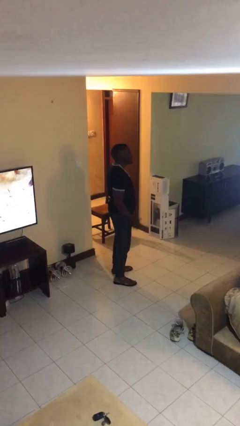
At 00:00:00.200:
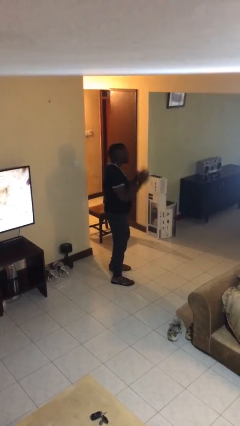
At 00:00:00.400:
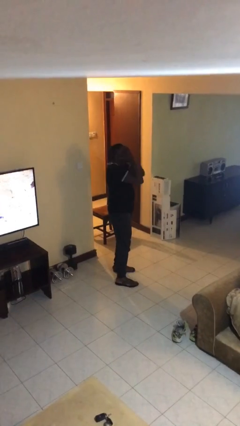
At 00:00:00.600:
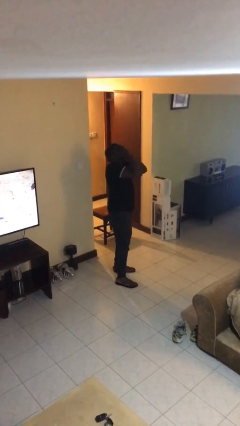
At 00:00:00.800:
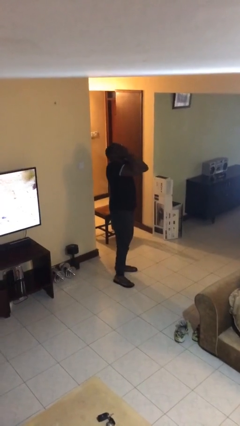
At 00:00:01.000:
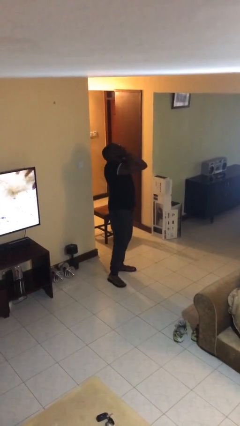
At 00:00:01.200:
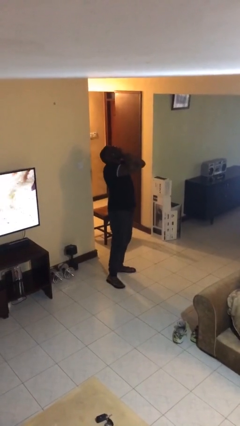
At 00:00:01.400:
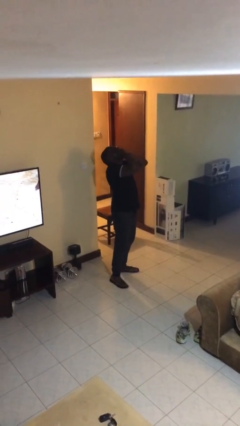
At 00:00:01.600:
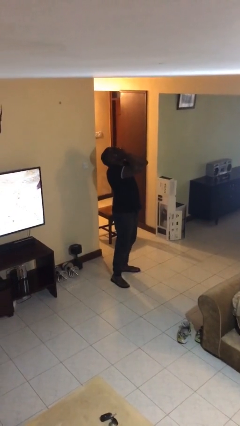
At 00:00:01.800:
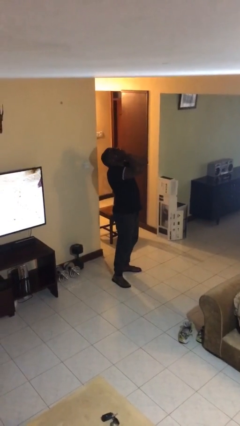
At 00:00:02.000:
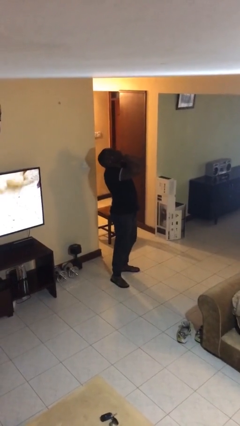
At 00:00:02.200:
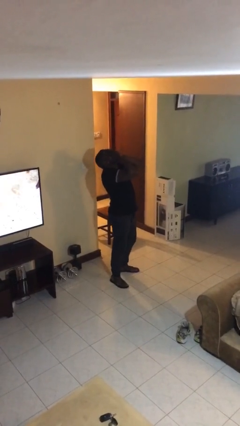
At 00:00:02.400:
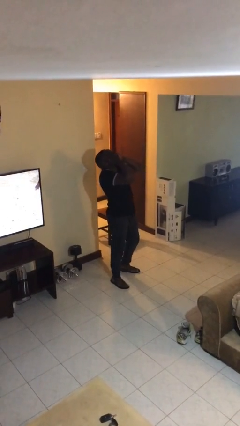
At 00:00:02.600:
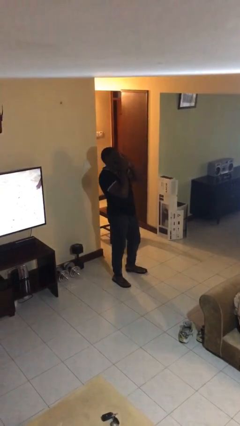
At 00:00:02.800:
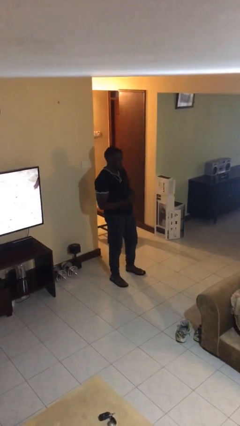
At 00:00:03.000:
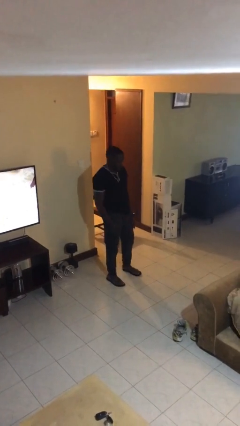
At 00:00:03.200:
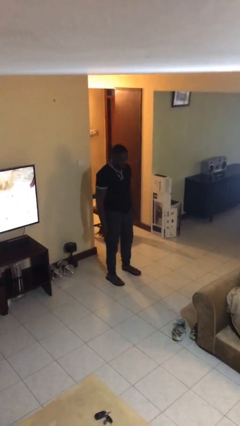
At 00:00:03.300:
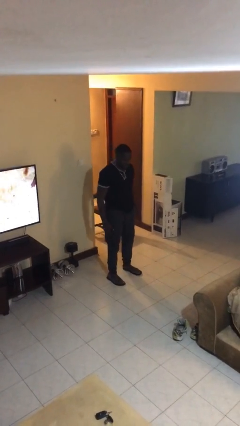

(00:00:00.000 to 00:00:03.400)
person covers face with hands

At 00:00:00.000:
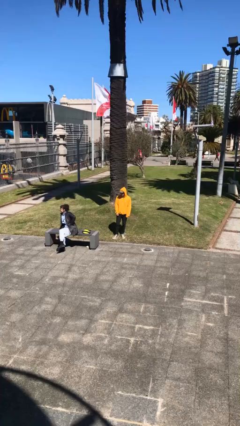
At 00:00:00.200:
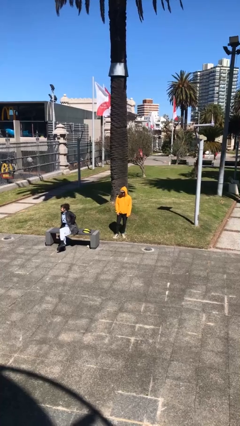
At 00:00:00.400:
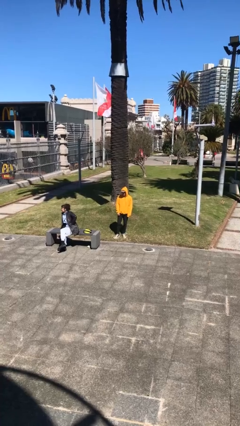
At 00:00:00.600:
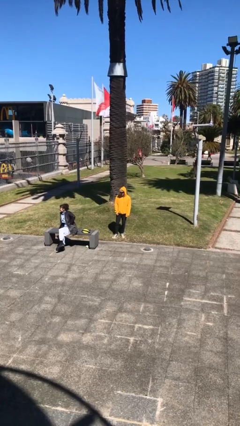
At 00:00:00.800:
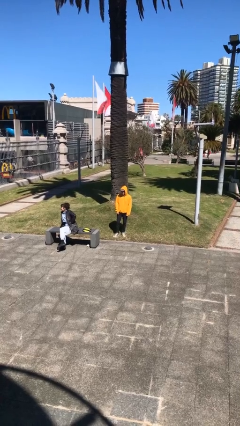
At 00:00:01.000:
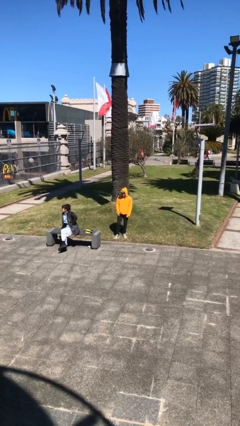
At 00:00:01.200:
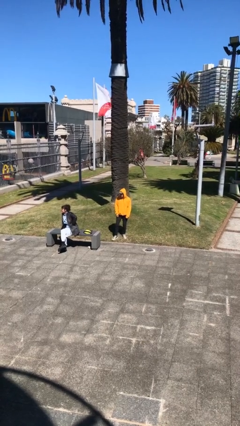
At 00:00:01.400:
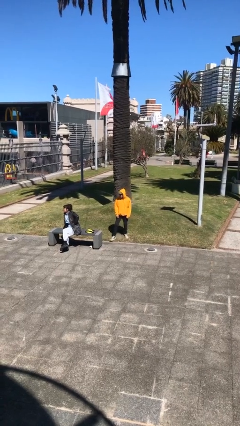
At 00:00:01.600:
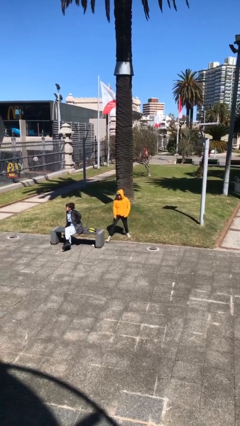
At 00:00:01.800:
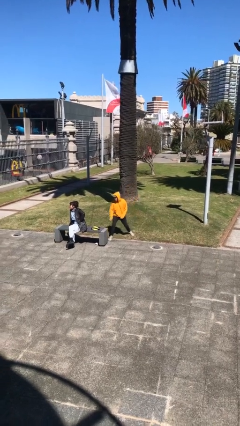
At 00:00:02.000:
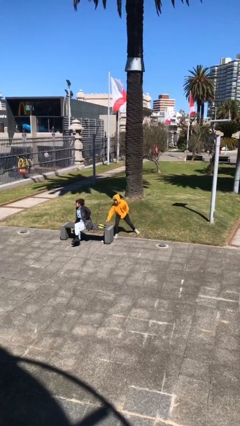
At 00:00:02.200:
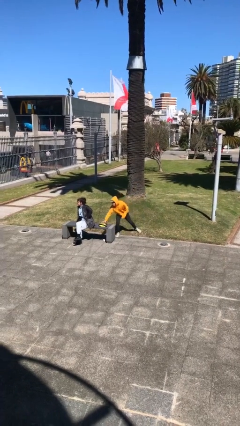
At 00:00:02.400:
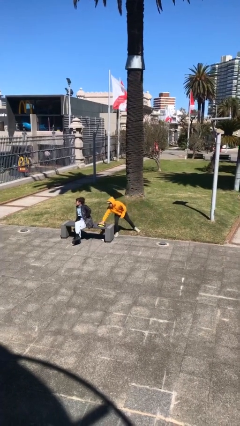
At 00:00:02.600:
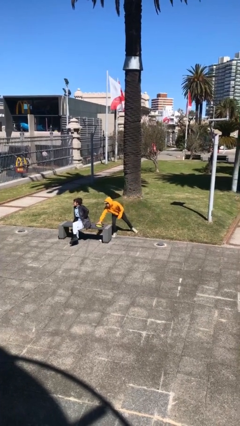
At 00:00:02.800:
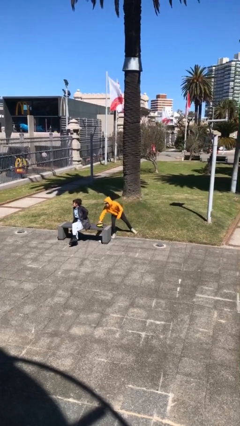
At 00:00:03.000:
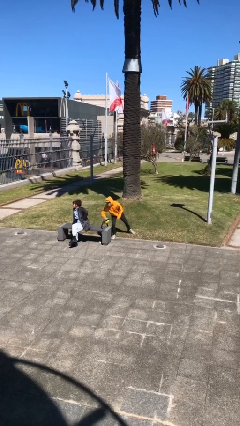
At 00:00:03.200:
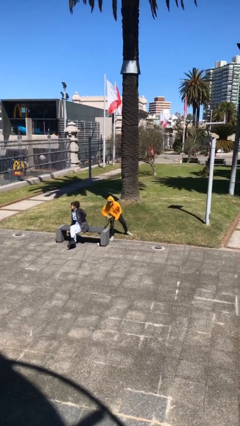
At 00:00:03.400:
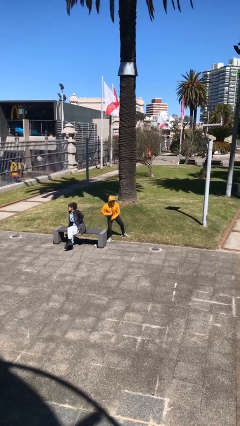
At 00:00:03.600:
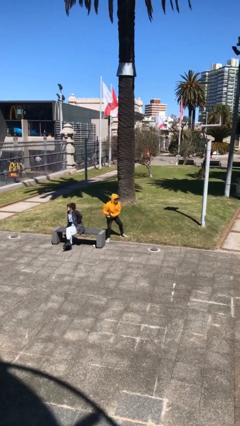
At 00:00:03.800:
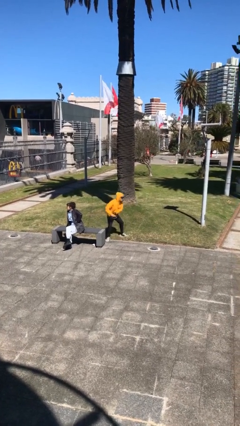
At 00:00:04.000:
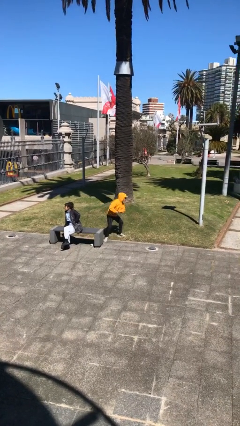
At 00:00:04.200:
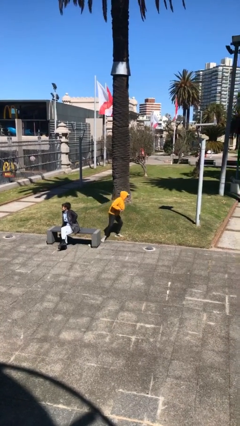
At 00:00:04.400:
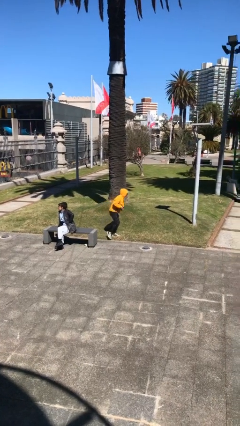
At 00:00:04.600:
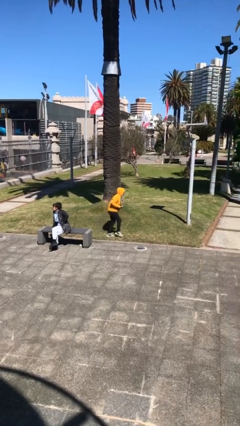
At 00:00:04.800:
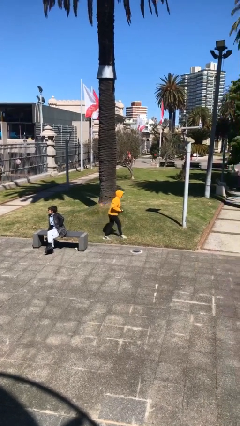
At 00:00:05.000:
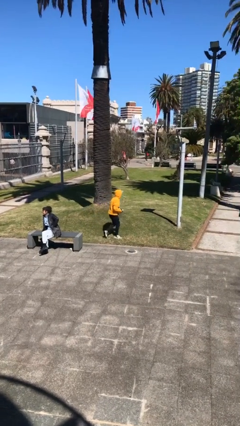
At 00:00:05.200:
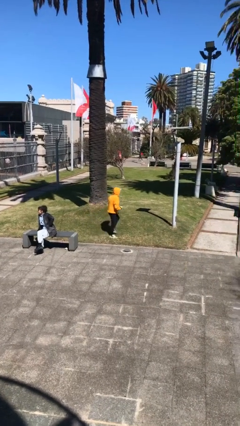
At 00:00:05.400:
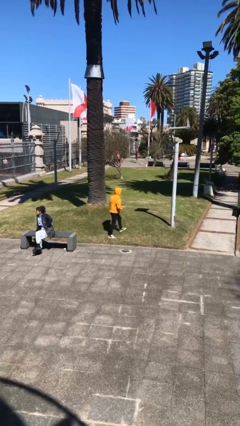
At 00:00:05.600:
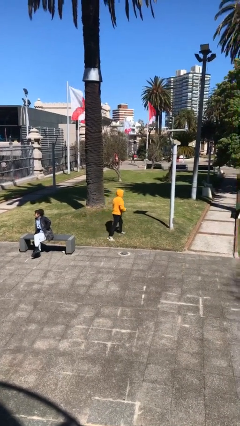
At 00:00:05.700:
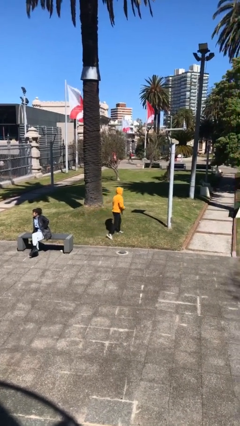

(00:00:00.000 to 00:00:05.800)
person steals object from person

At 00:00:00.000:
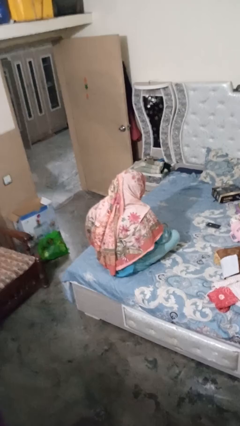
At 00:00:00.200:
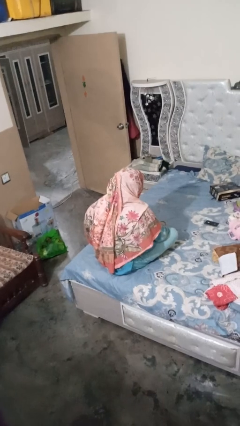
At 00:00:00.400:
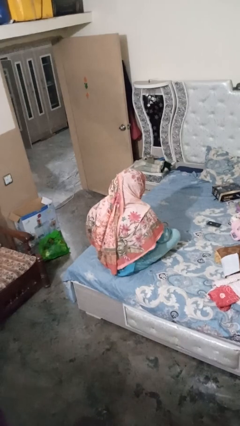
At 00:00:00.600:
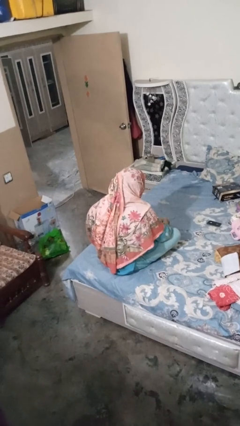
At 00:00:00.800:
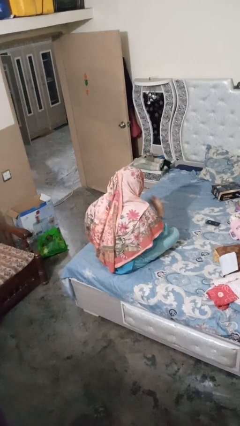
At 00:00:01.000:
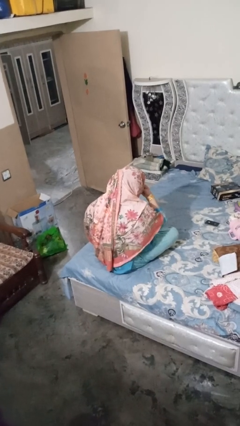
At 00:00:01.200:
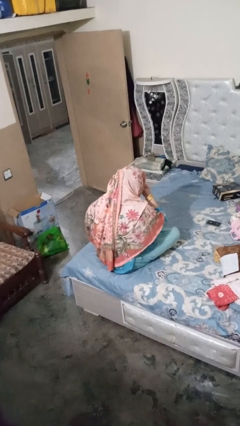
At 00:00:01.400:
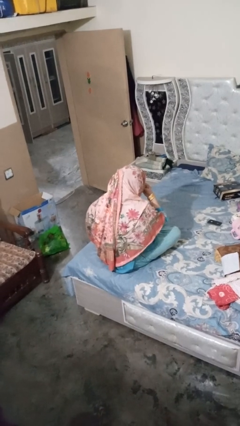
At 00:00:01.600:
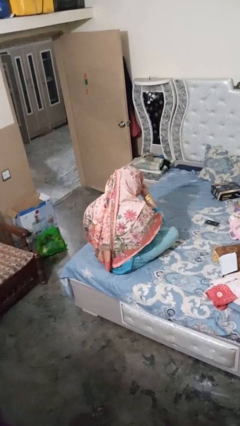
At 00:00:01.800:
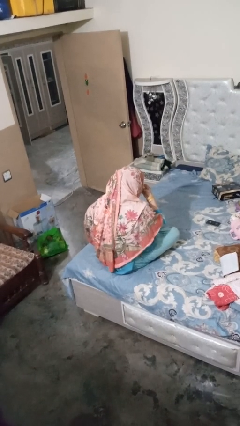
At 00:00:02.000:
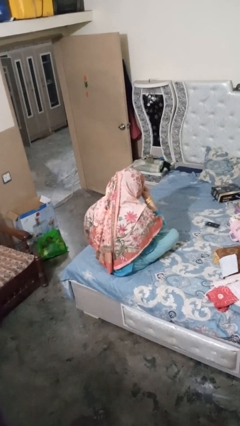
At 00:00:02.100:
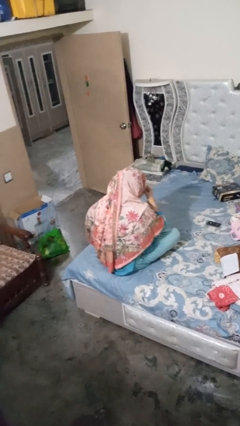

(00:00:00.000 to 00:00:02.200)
person blows nose

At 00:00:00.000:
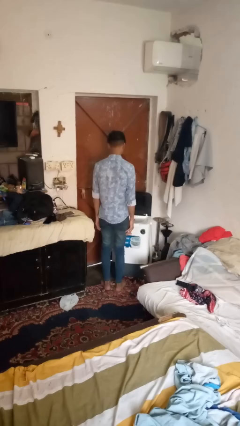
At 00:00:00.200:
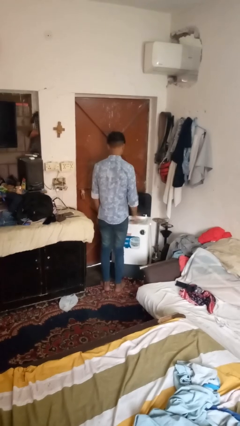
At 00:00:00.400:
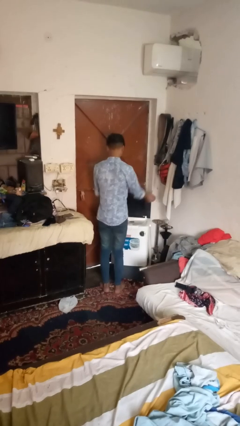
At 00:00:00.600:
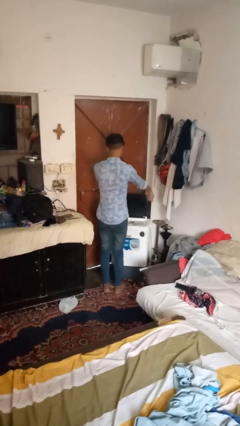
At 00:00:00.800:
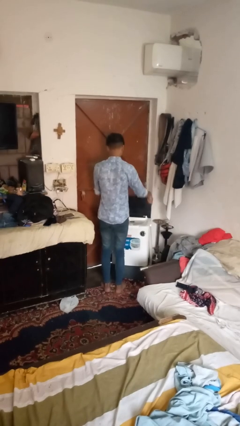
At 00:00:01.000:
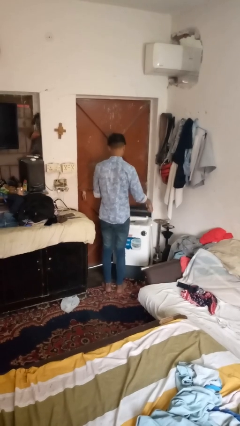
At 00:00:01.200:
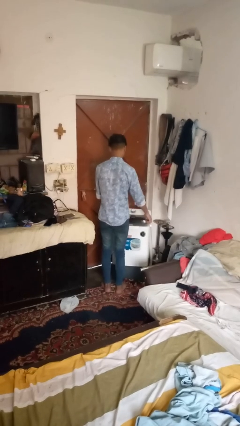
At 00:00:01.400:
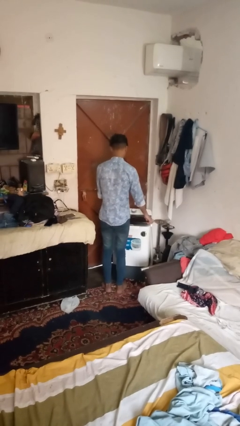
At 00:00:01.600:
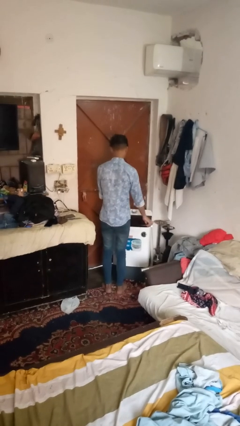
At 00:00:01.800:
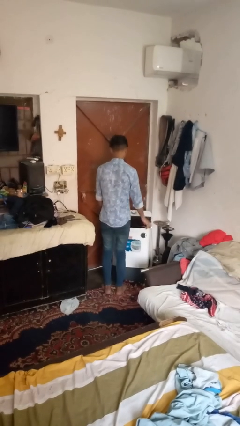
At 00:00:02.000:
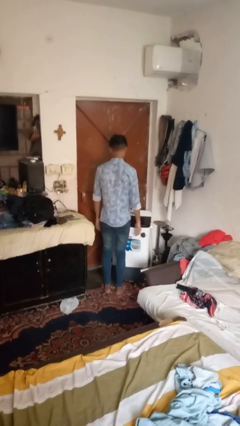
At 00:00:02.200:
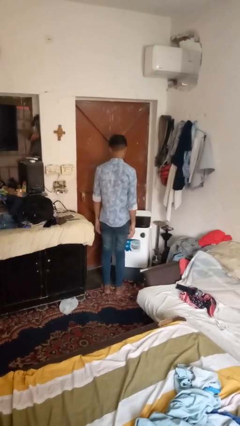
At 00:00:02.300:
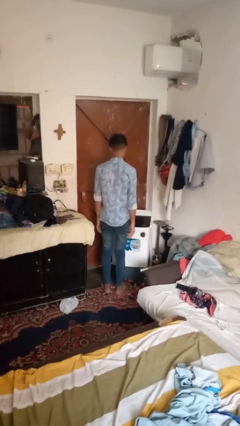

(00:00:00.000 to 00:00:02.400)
person closes clothes washer

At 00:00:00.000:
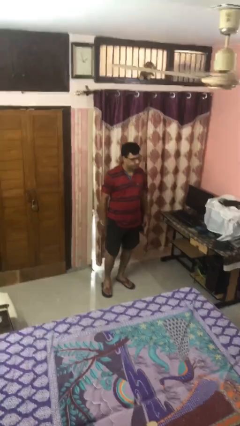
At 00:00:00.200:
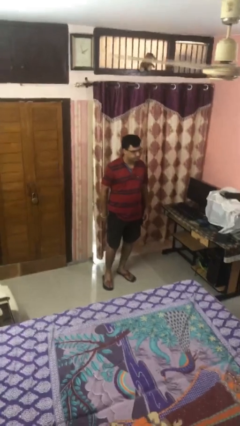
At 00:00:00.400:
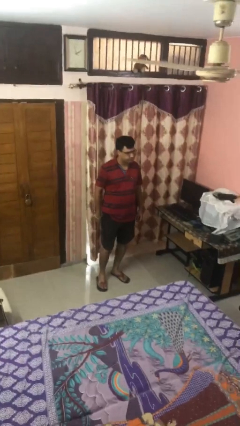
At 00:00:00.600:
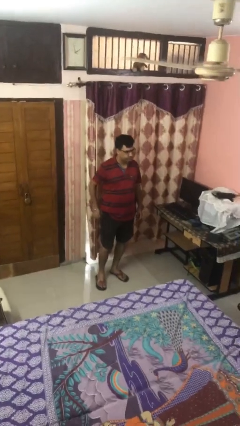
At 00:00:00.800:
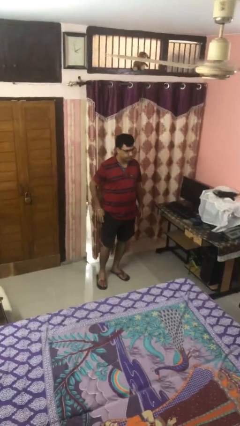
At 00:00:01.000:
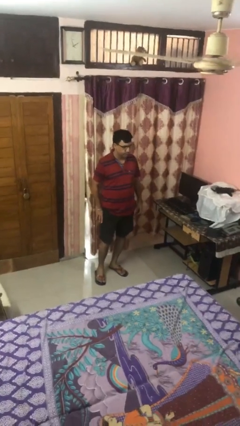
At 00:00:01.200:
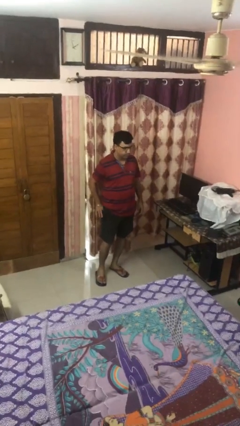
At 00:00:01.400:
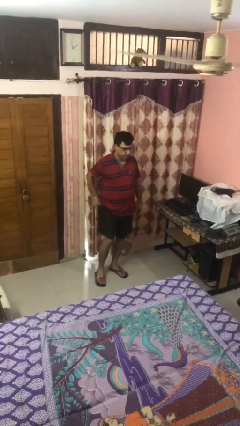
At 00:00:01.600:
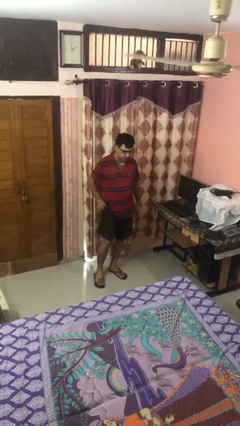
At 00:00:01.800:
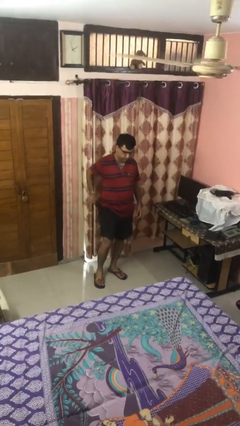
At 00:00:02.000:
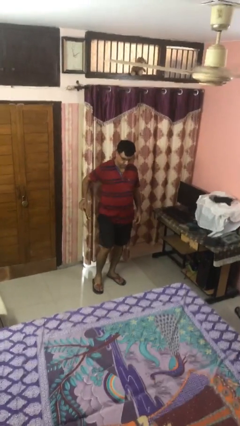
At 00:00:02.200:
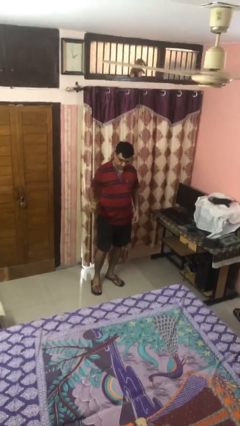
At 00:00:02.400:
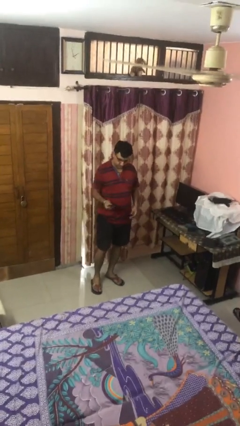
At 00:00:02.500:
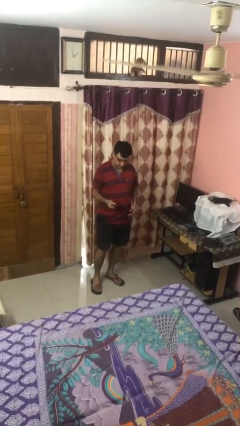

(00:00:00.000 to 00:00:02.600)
person takes phone from pocket

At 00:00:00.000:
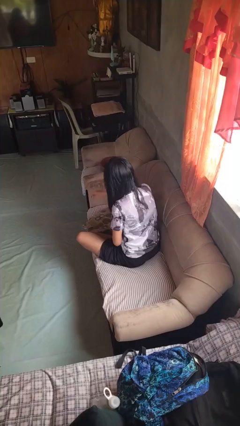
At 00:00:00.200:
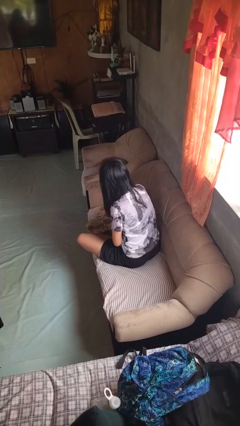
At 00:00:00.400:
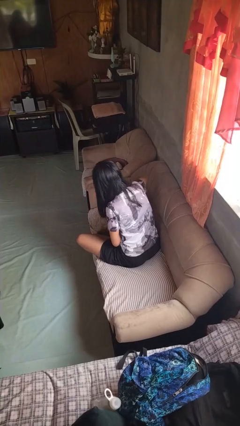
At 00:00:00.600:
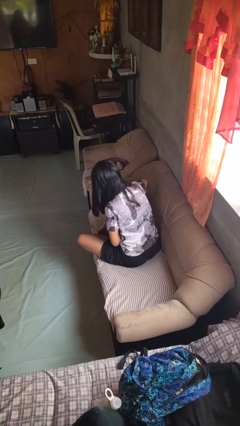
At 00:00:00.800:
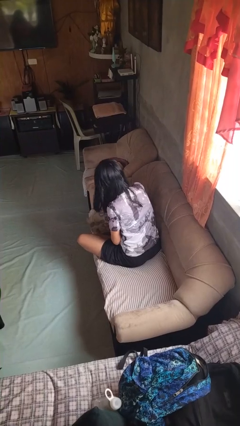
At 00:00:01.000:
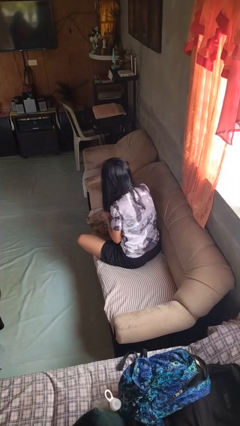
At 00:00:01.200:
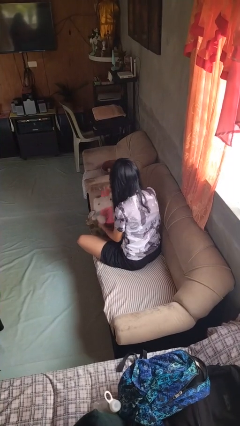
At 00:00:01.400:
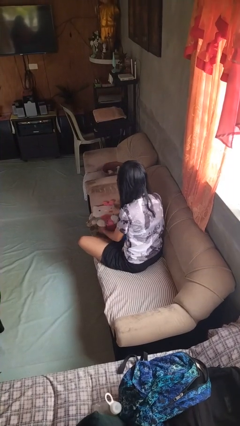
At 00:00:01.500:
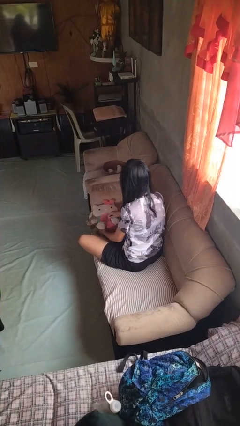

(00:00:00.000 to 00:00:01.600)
person searches in couch
